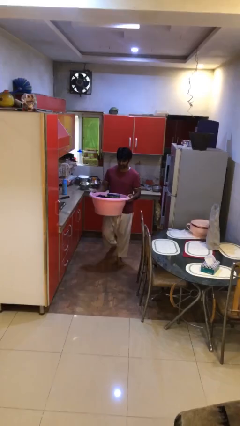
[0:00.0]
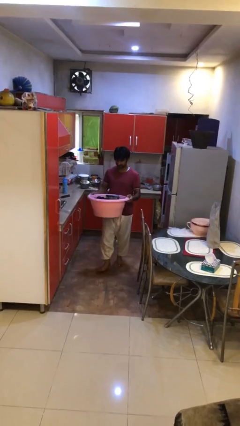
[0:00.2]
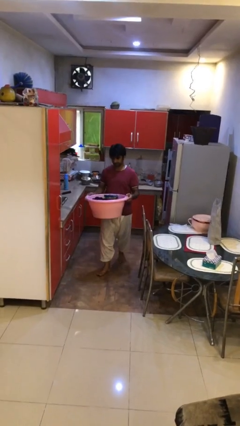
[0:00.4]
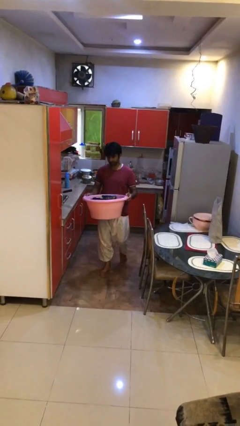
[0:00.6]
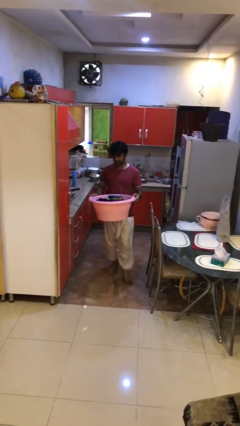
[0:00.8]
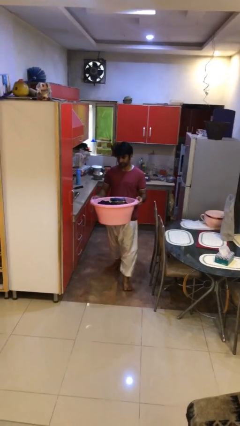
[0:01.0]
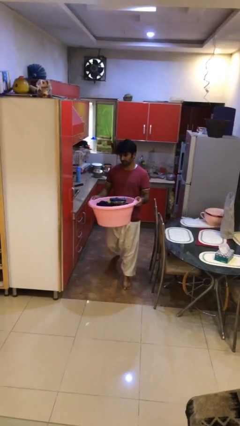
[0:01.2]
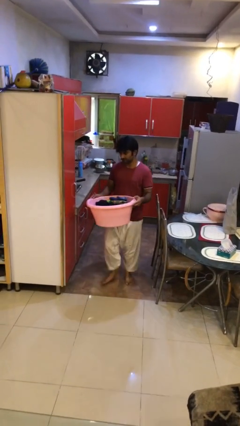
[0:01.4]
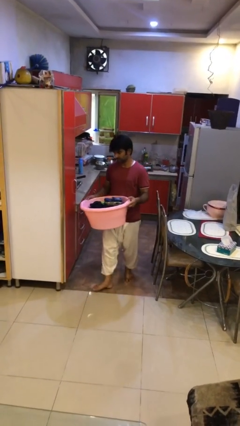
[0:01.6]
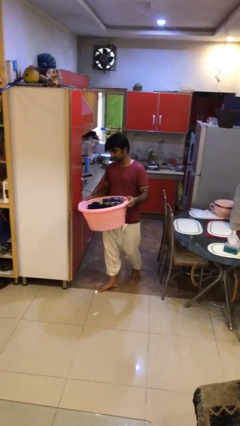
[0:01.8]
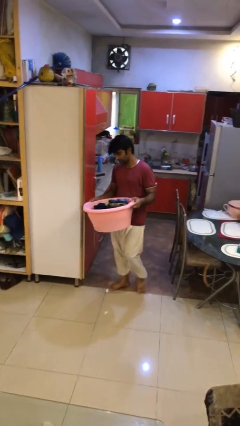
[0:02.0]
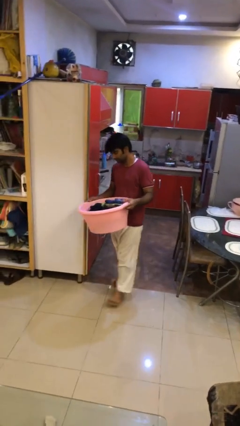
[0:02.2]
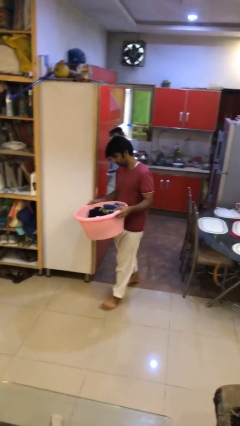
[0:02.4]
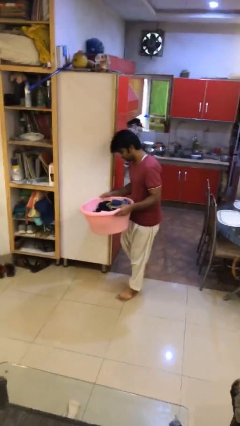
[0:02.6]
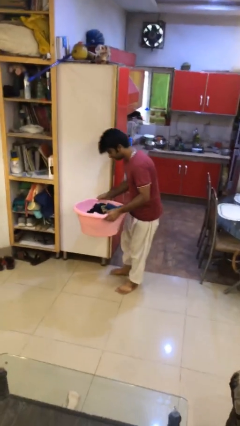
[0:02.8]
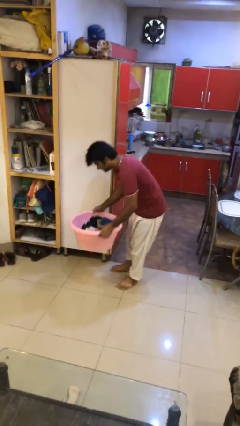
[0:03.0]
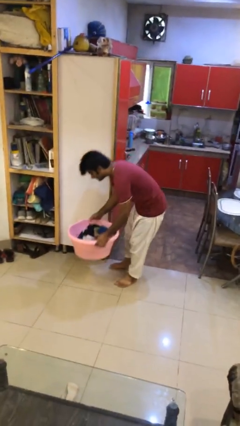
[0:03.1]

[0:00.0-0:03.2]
person carries heavy object

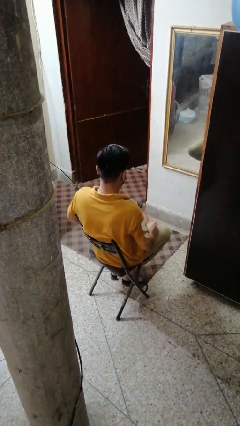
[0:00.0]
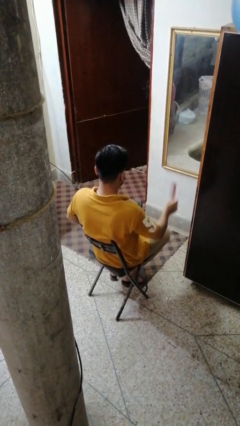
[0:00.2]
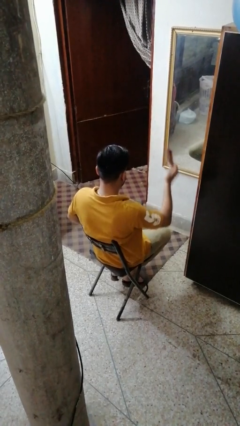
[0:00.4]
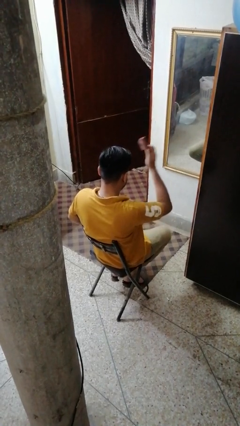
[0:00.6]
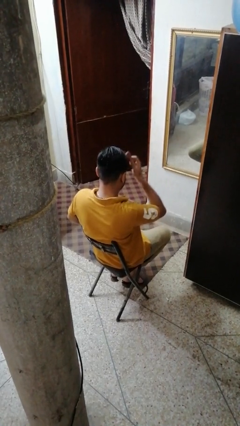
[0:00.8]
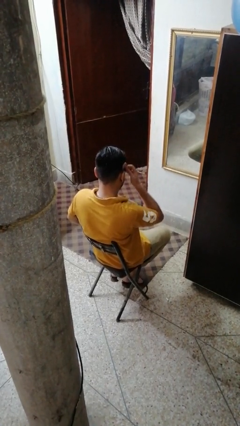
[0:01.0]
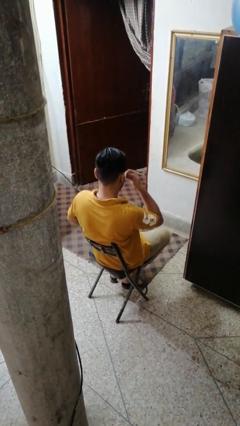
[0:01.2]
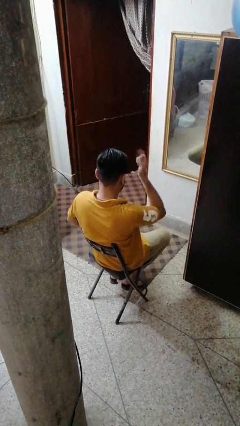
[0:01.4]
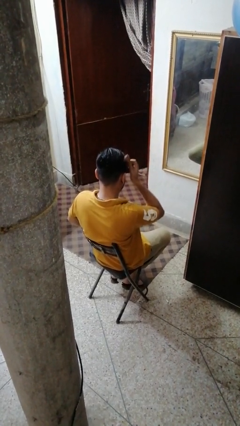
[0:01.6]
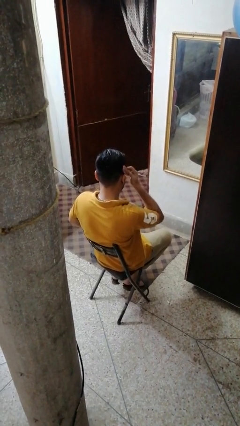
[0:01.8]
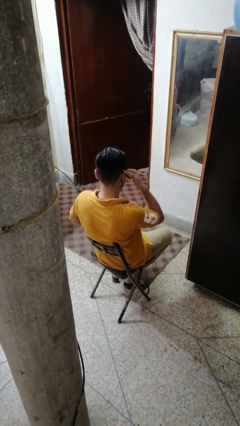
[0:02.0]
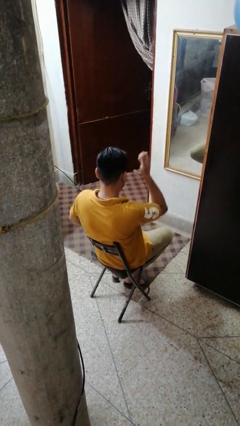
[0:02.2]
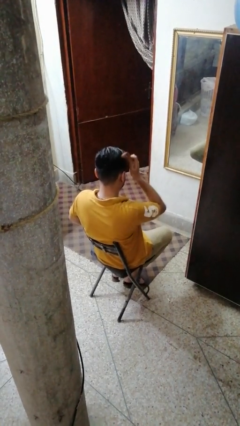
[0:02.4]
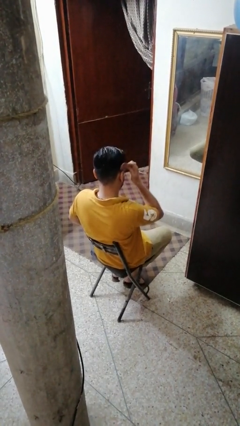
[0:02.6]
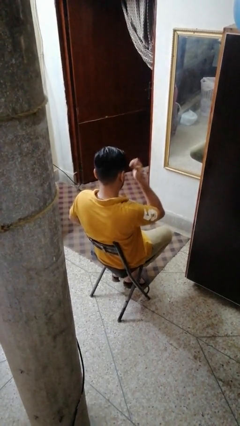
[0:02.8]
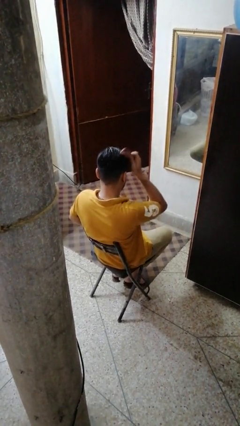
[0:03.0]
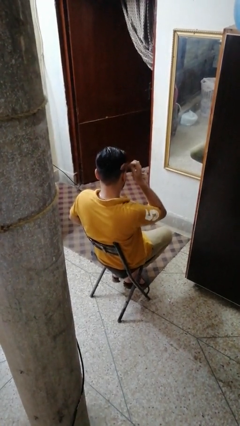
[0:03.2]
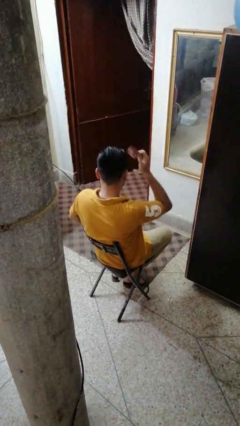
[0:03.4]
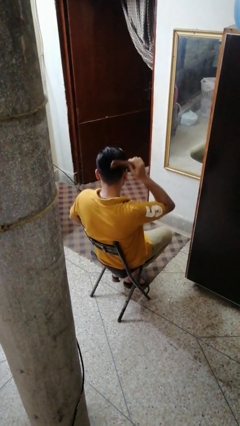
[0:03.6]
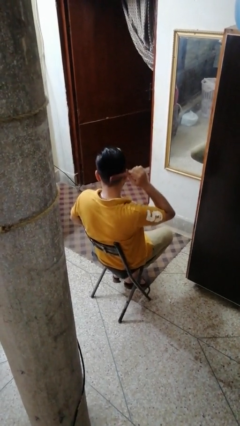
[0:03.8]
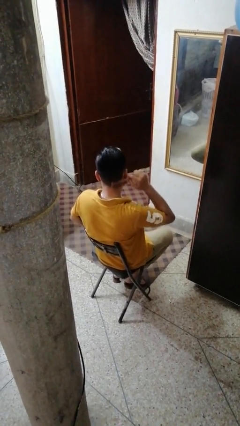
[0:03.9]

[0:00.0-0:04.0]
person brushes hair

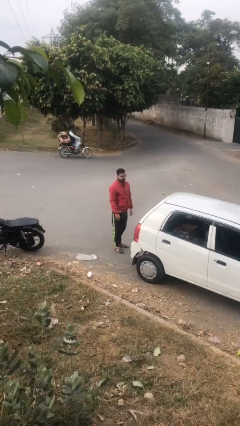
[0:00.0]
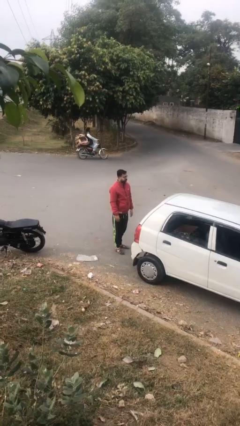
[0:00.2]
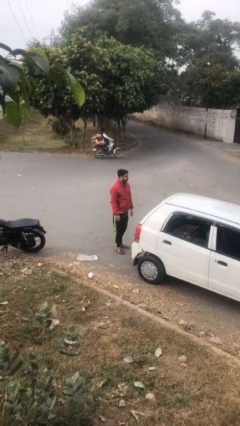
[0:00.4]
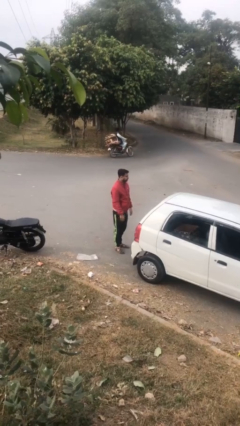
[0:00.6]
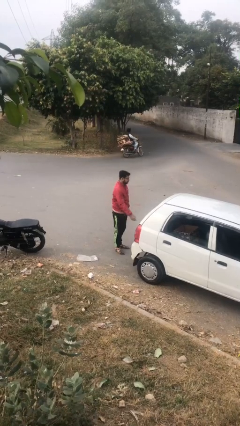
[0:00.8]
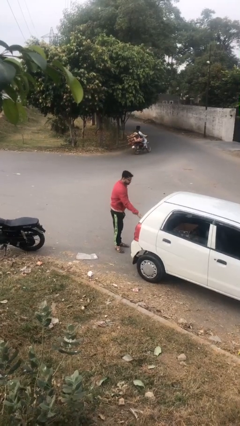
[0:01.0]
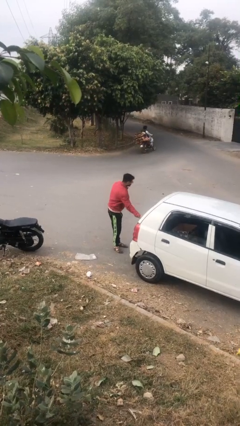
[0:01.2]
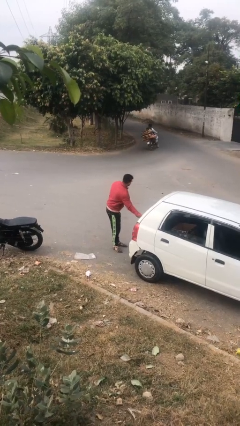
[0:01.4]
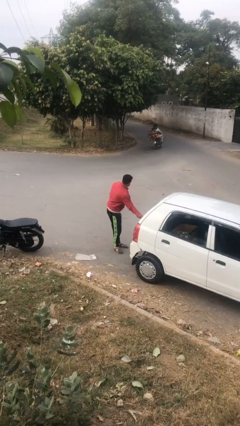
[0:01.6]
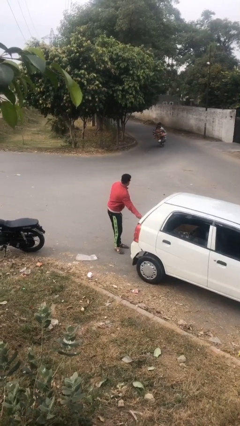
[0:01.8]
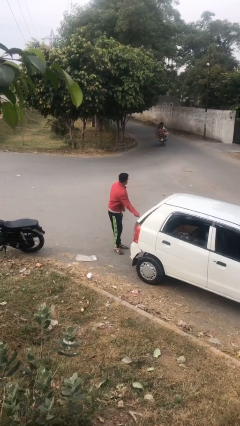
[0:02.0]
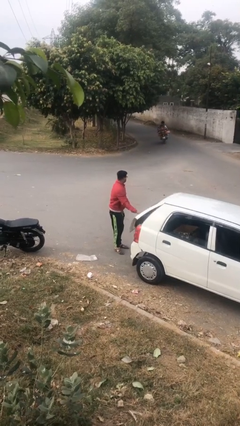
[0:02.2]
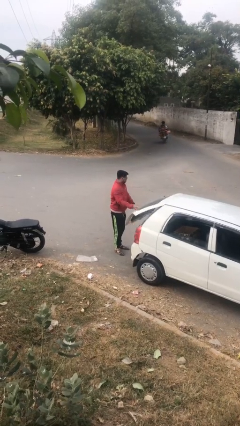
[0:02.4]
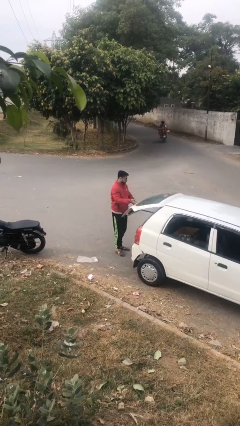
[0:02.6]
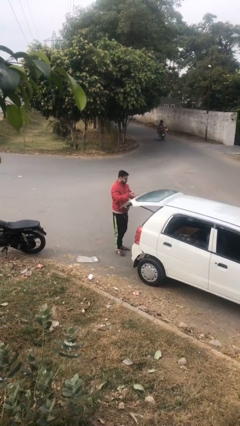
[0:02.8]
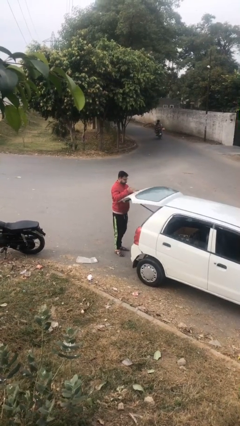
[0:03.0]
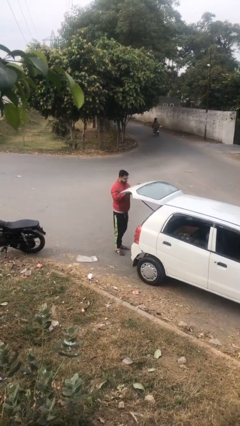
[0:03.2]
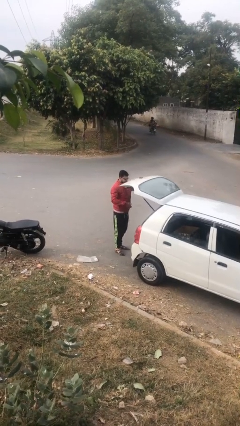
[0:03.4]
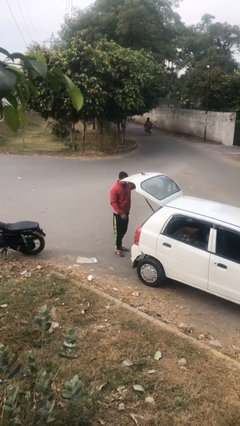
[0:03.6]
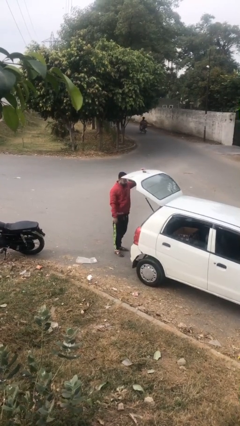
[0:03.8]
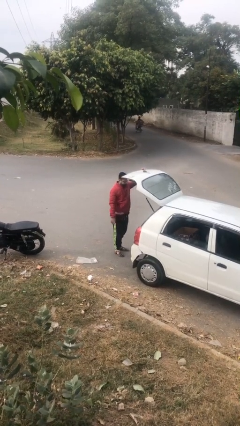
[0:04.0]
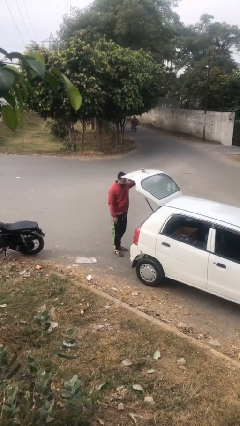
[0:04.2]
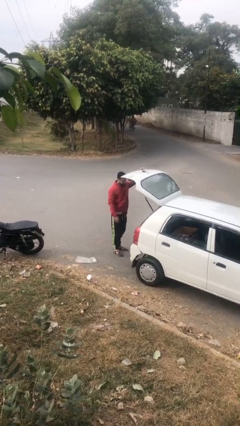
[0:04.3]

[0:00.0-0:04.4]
person opens car trunk

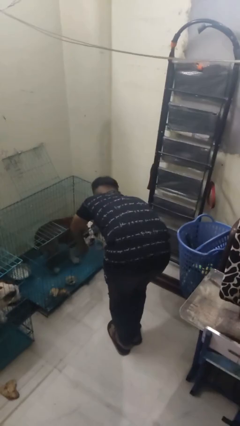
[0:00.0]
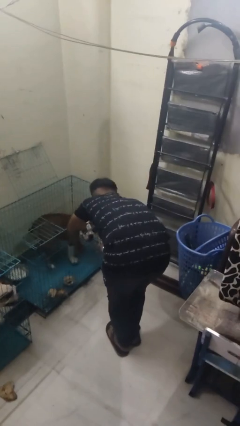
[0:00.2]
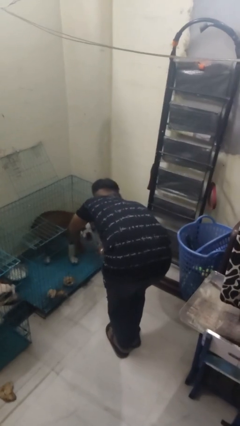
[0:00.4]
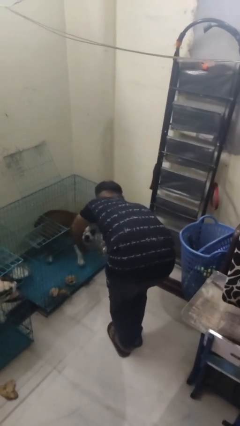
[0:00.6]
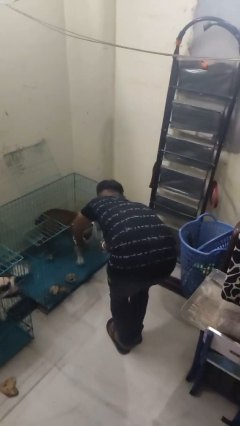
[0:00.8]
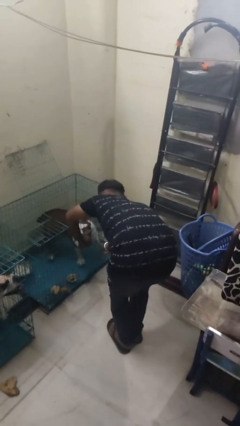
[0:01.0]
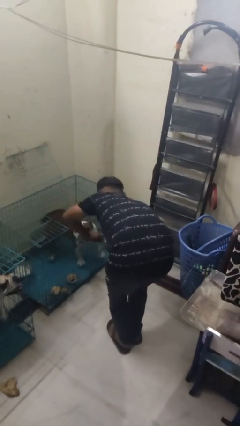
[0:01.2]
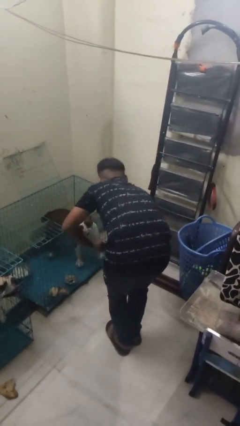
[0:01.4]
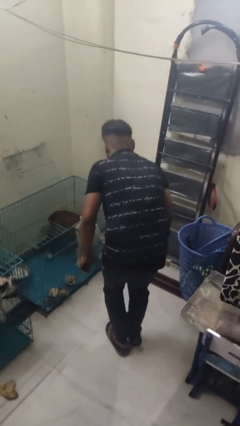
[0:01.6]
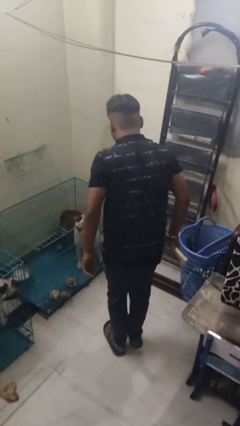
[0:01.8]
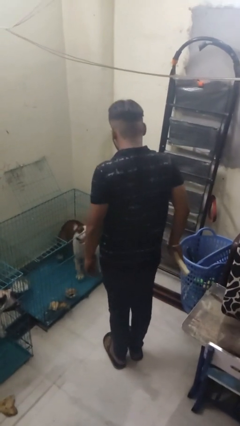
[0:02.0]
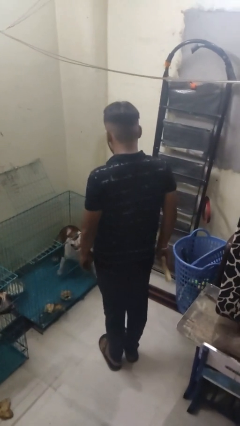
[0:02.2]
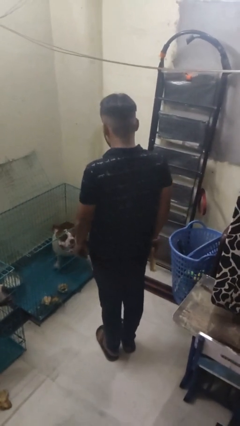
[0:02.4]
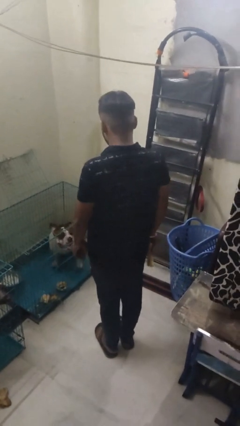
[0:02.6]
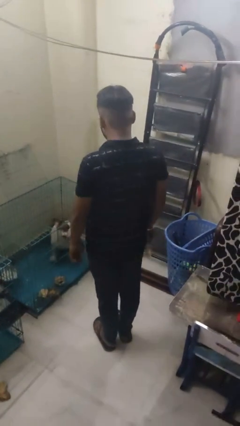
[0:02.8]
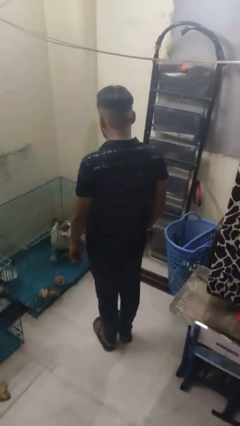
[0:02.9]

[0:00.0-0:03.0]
person crates dog

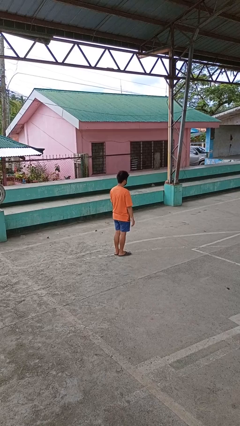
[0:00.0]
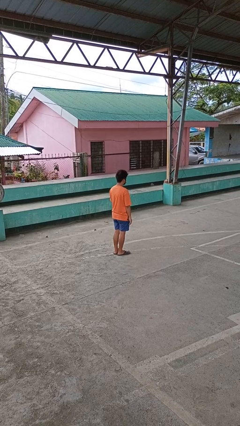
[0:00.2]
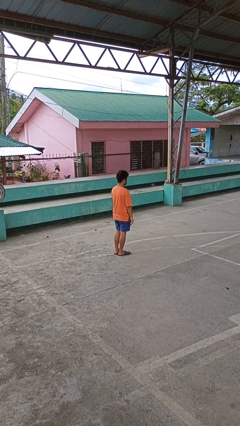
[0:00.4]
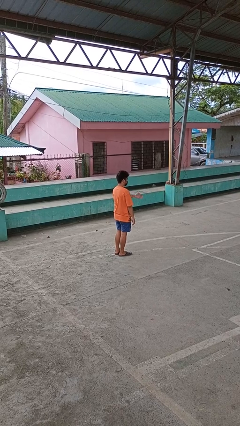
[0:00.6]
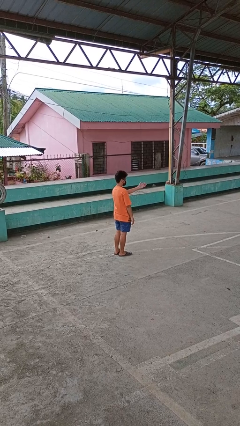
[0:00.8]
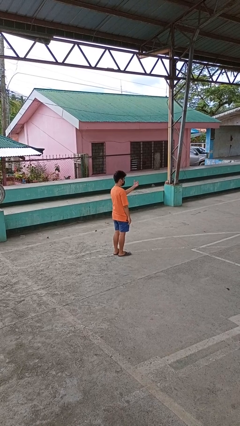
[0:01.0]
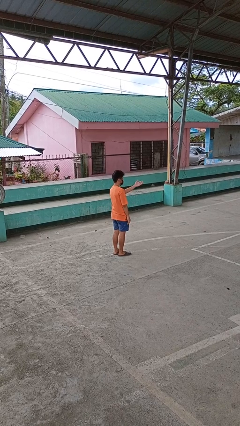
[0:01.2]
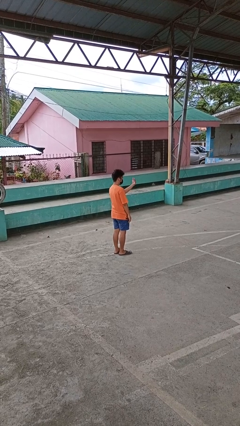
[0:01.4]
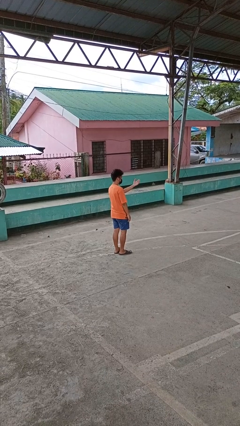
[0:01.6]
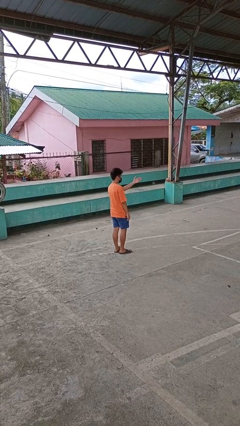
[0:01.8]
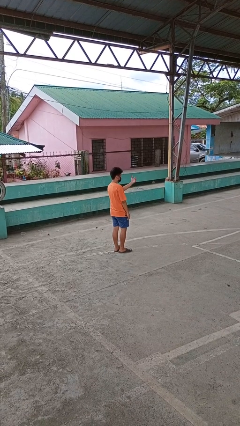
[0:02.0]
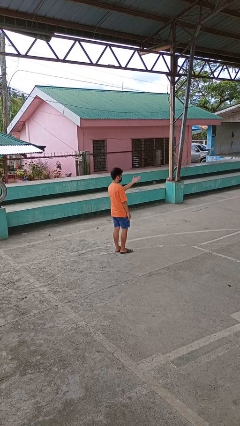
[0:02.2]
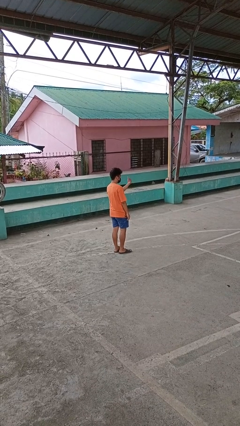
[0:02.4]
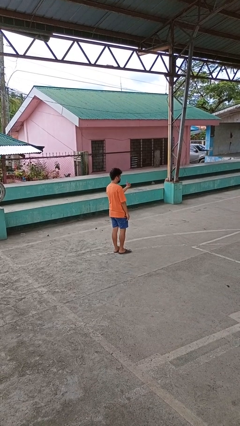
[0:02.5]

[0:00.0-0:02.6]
person gestures come here

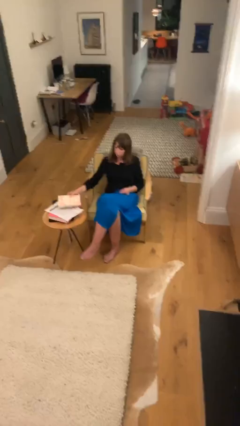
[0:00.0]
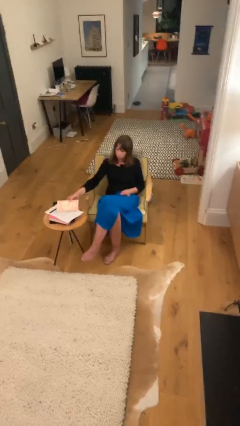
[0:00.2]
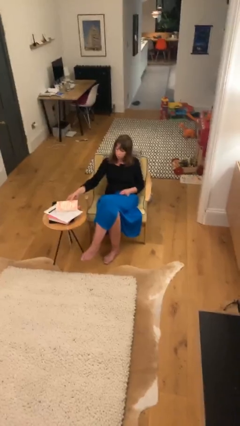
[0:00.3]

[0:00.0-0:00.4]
person puts down object on table
